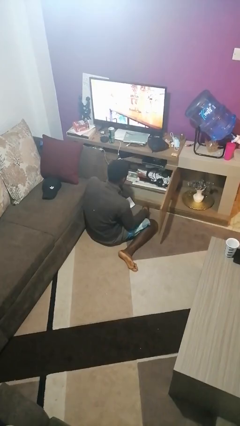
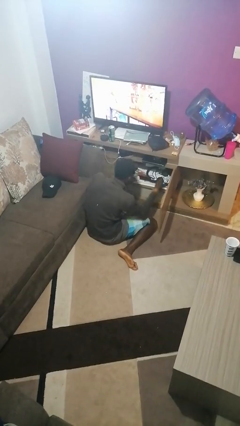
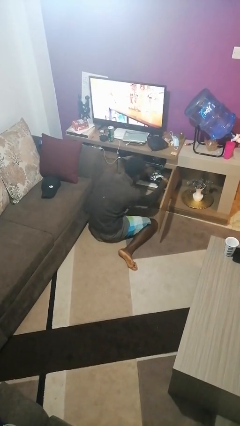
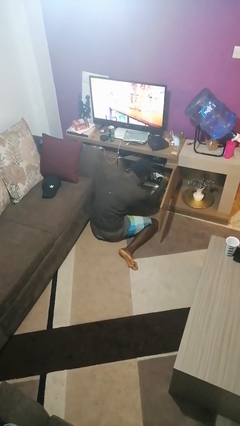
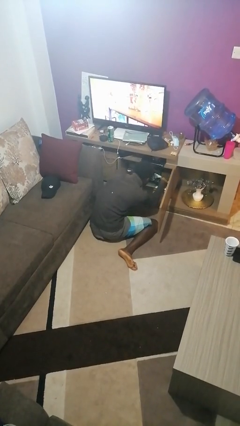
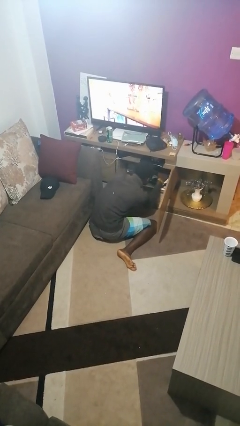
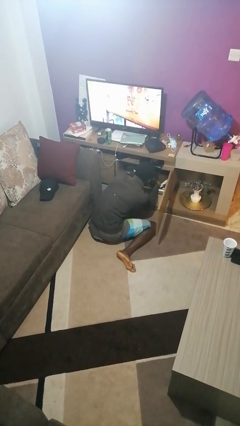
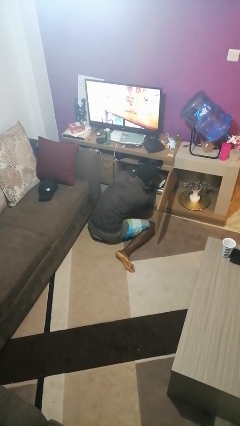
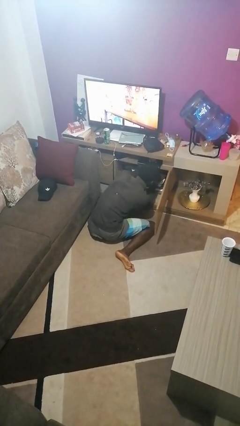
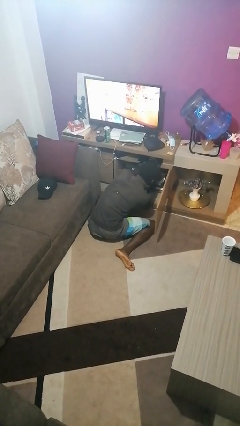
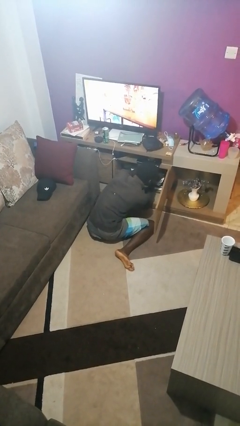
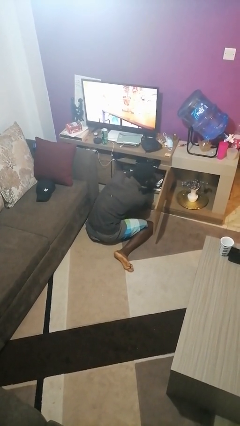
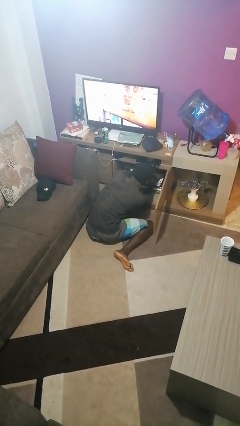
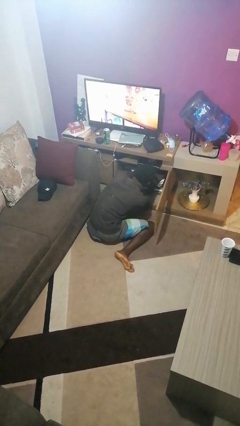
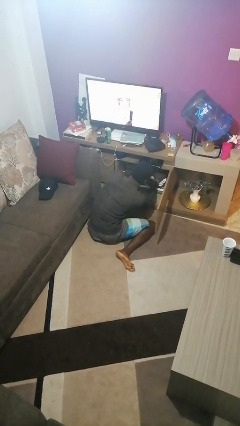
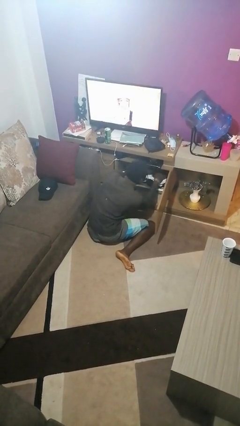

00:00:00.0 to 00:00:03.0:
person searches in cabinet

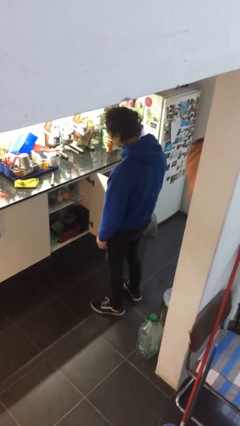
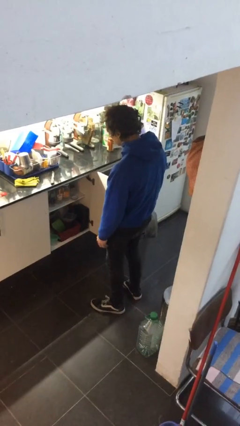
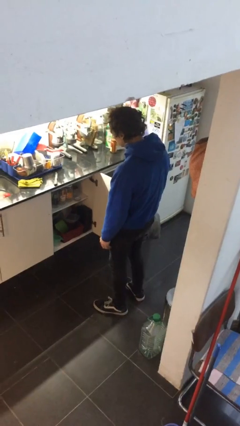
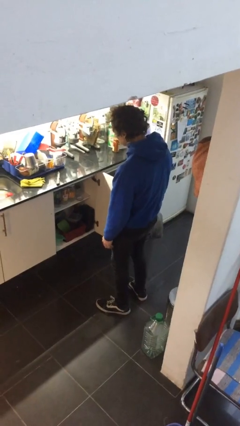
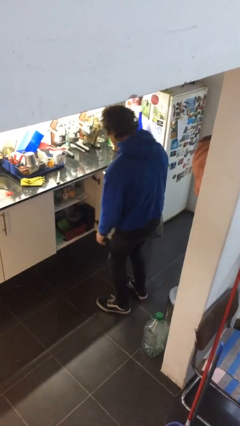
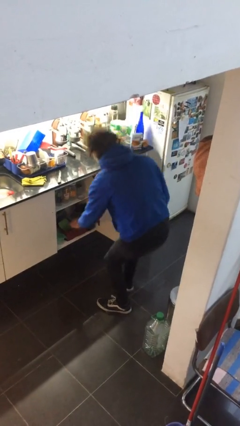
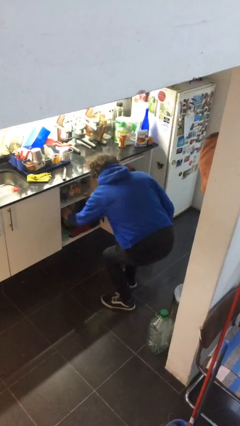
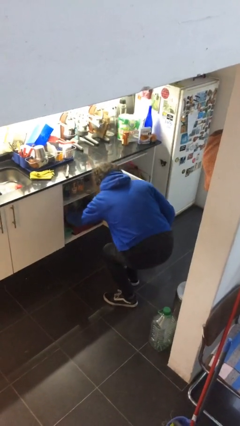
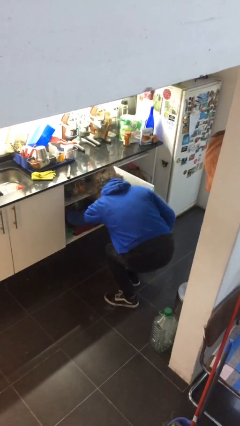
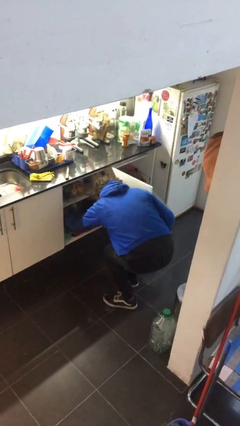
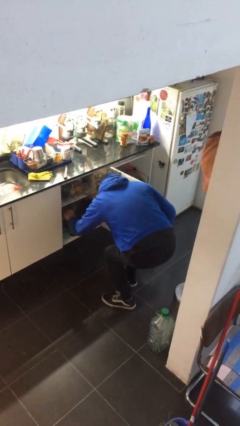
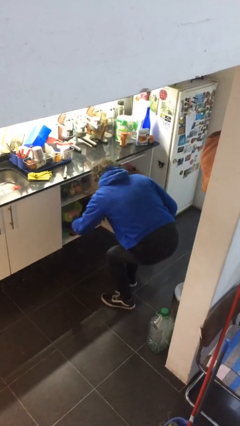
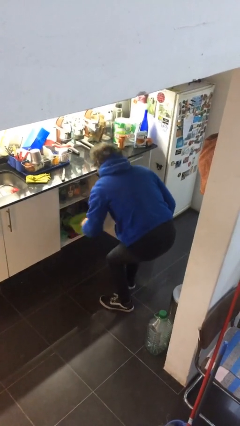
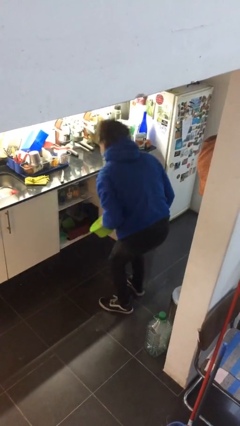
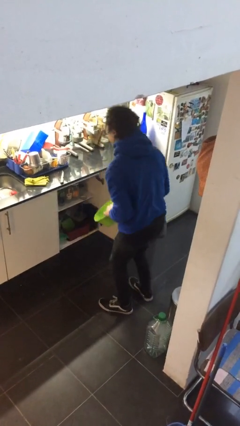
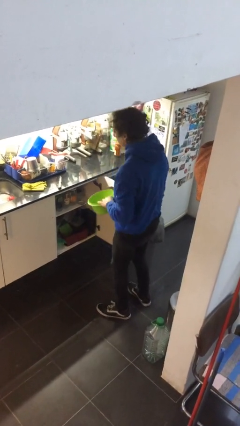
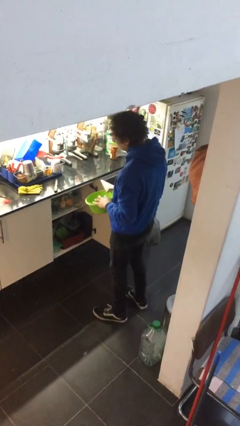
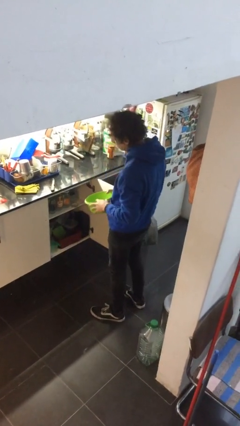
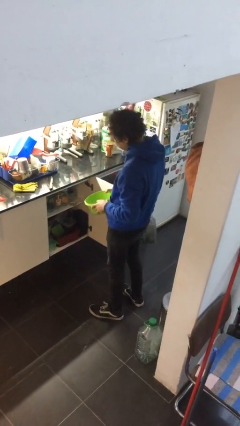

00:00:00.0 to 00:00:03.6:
person picks up object from cabinet

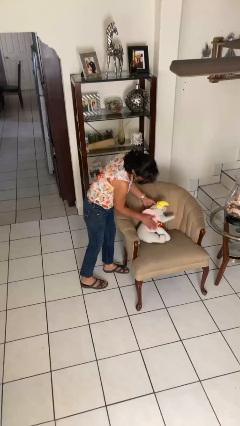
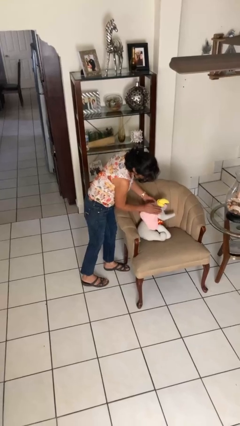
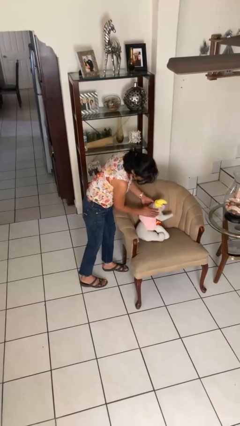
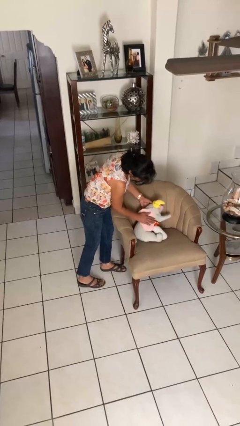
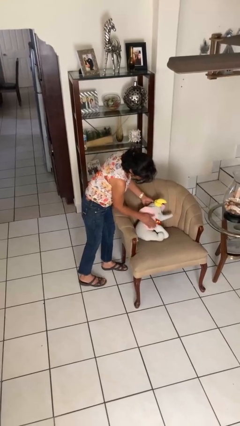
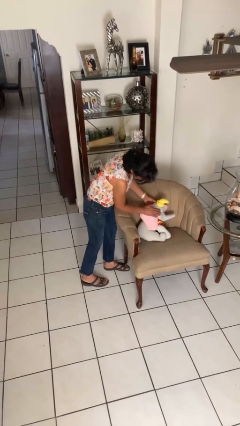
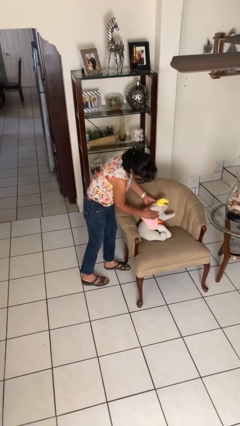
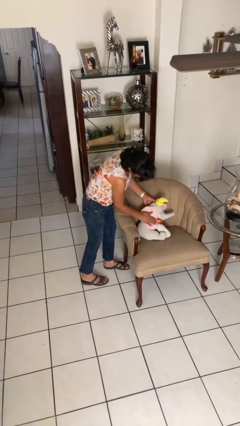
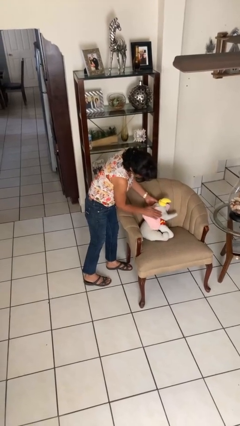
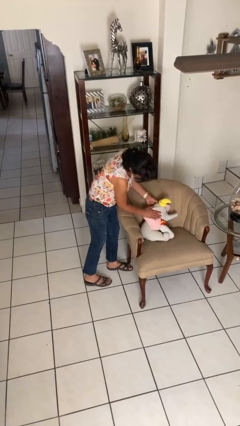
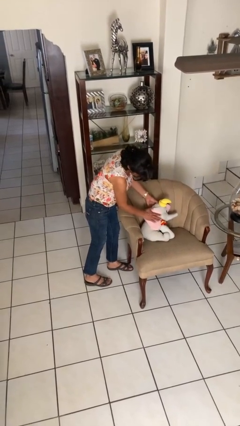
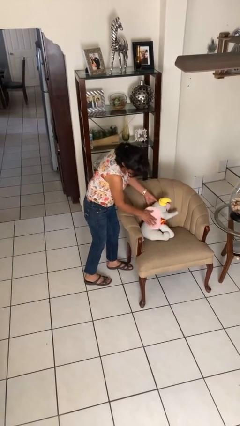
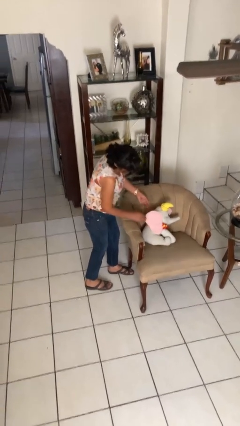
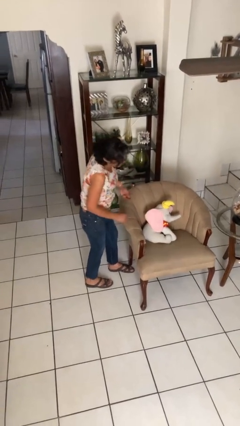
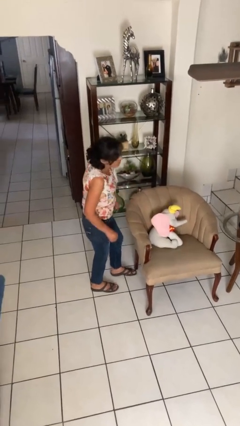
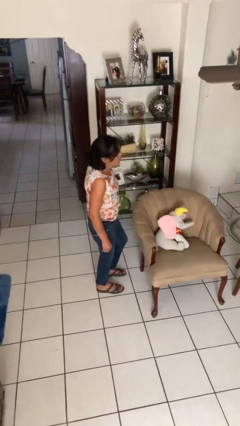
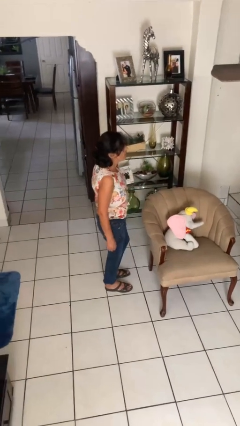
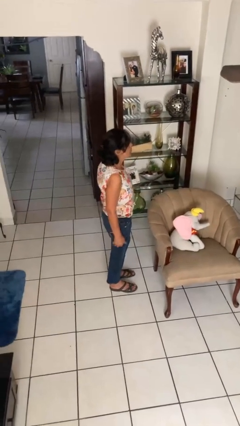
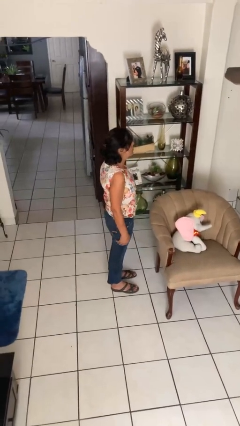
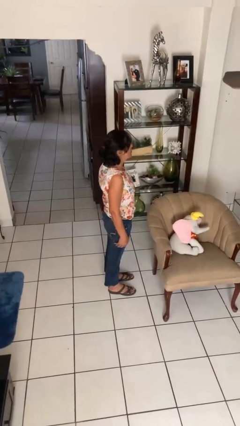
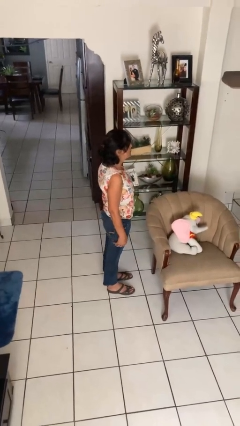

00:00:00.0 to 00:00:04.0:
person waves hand over object

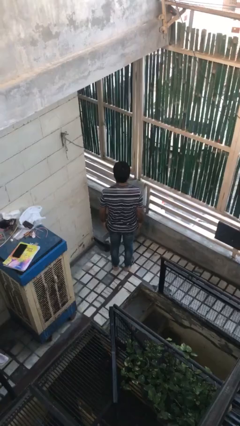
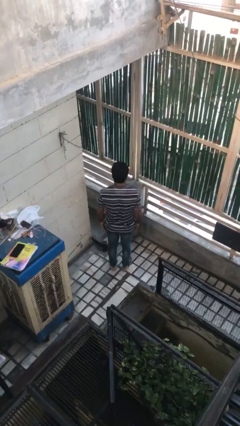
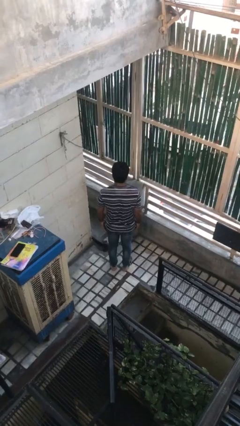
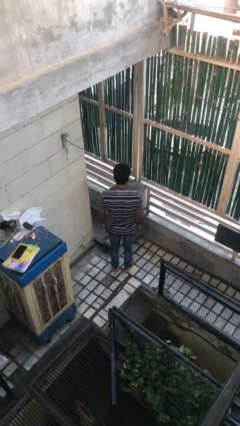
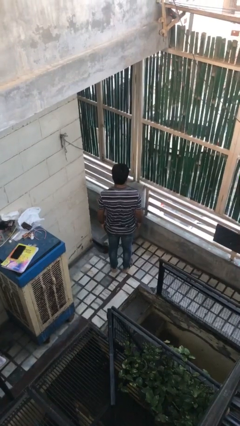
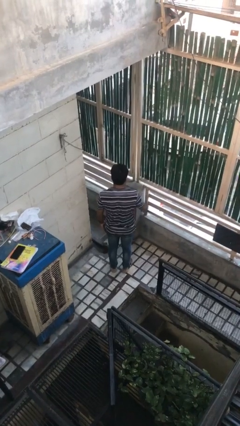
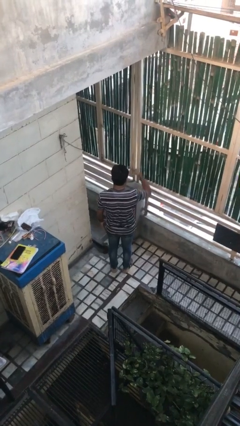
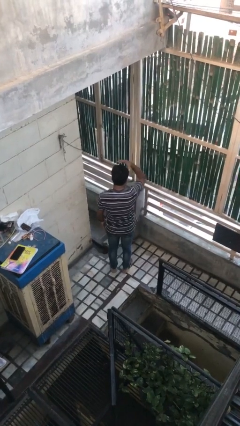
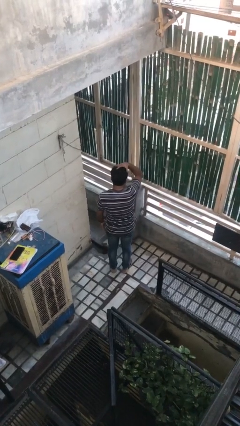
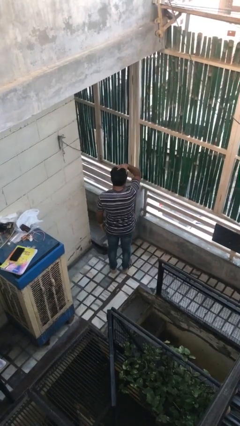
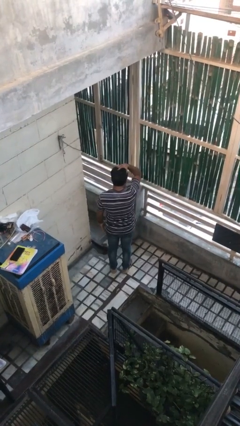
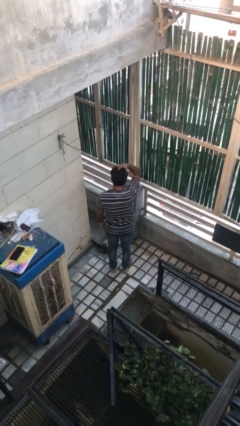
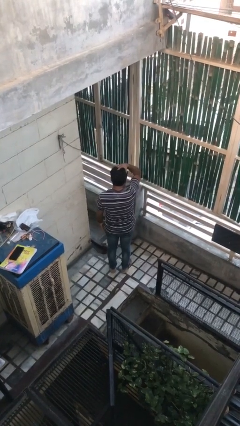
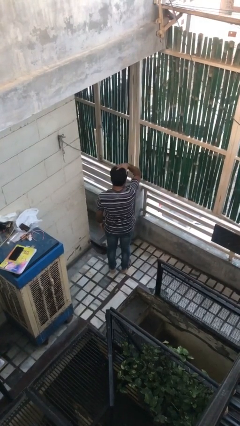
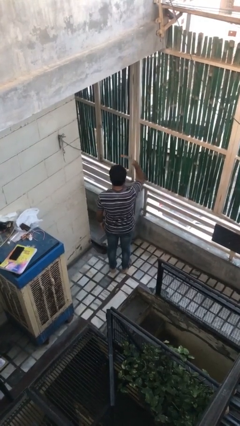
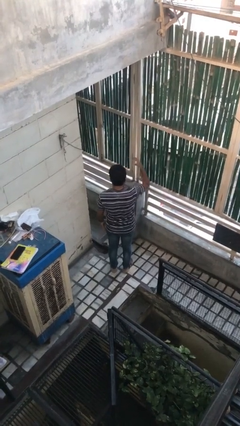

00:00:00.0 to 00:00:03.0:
person pats head

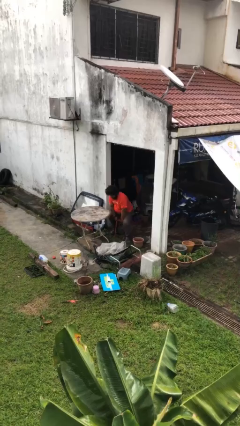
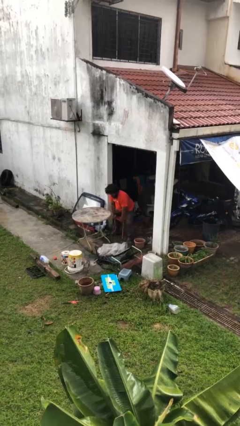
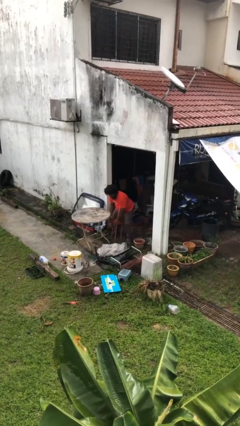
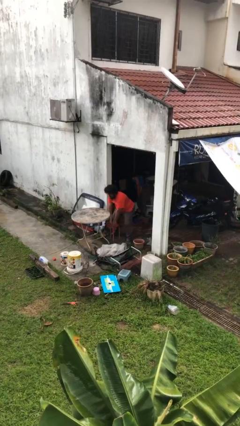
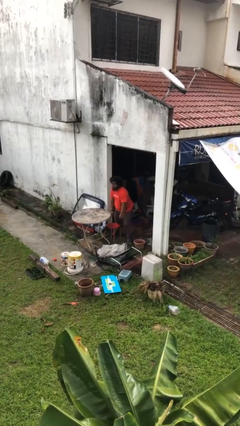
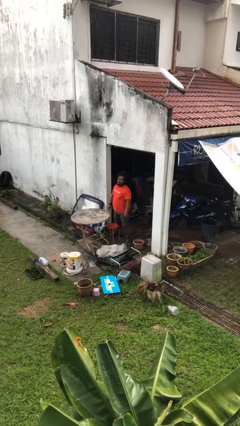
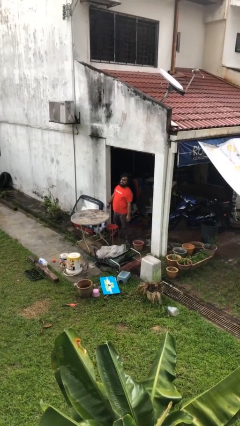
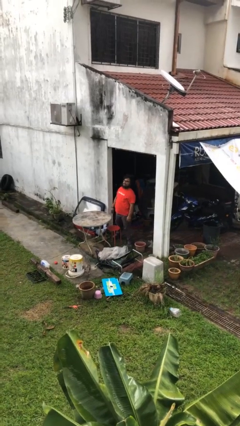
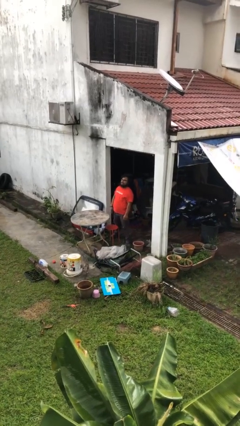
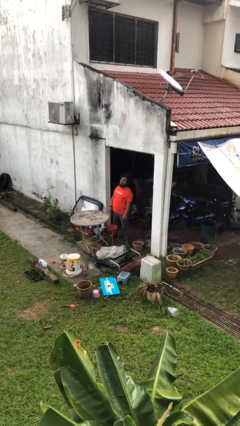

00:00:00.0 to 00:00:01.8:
person stands up

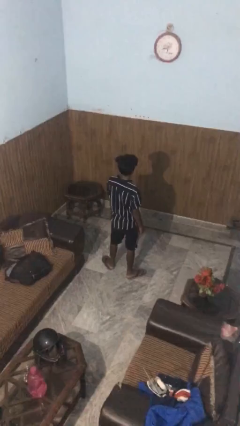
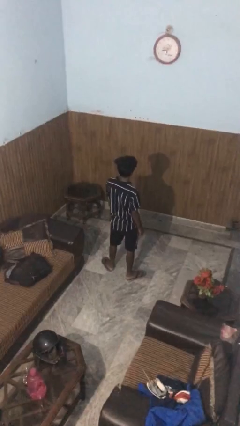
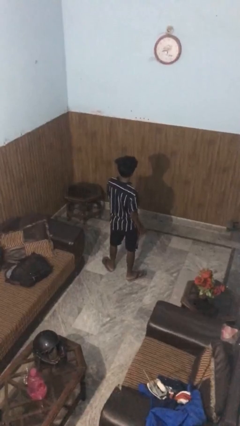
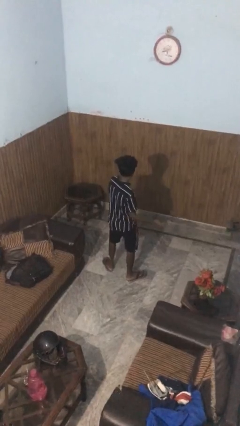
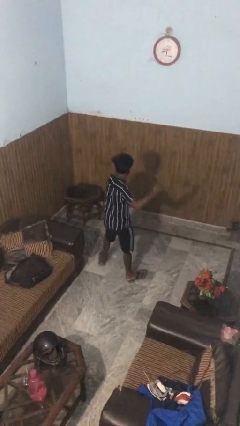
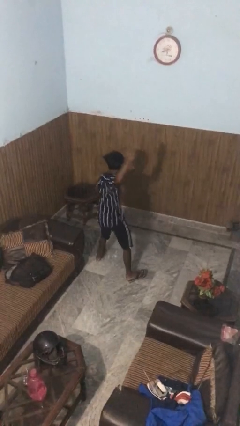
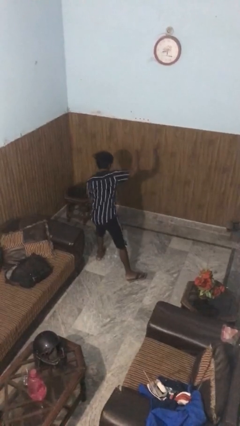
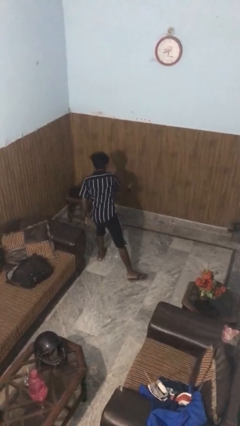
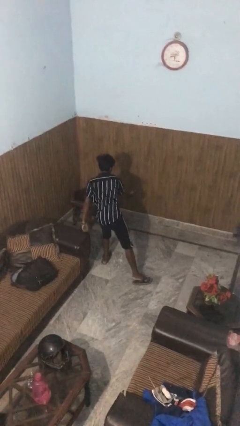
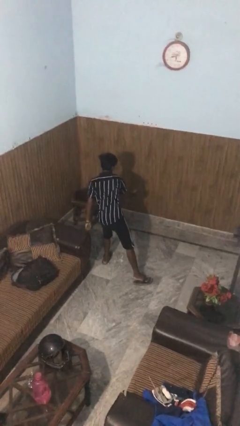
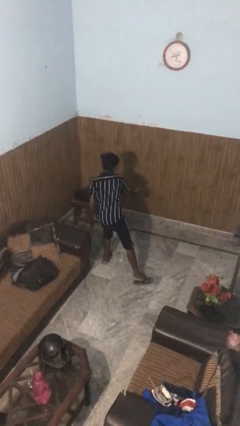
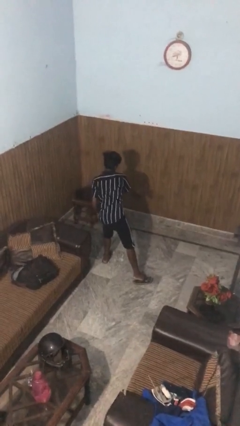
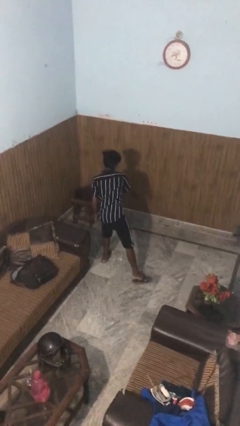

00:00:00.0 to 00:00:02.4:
person karate chop
